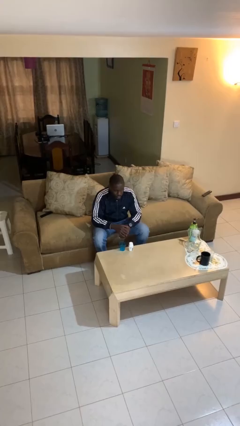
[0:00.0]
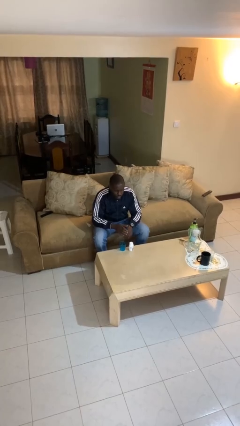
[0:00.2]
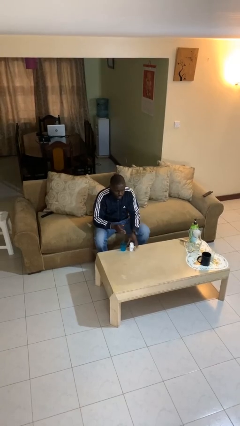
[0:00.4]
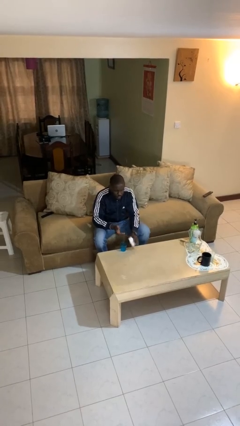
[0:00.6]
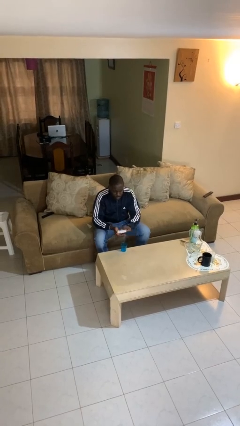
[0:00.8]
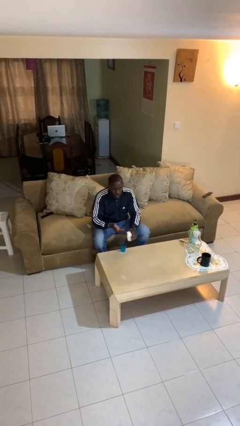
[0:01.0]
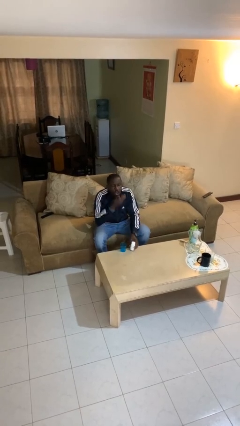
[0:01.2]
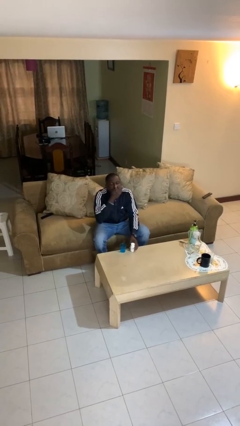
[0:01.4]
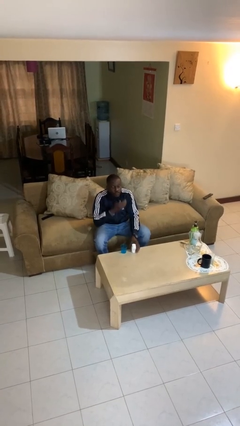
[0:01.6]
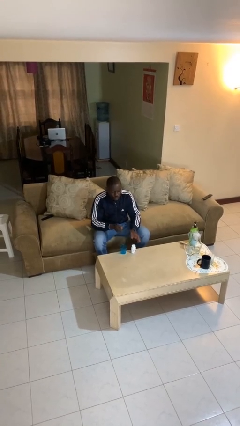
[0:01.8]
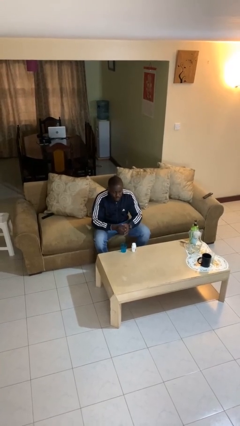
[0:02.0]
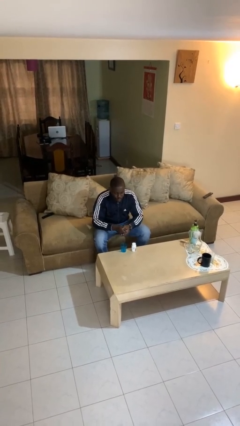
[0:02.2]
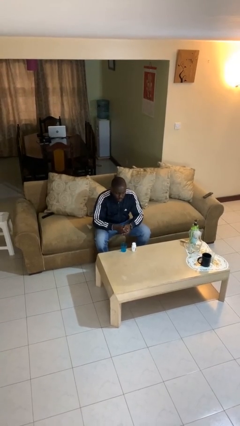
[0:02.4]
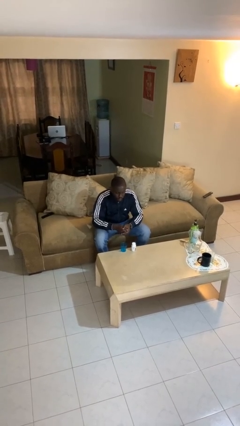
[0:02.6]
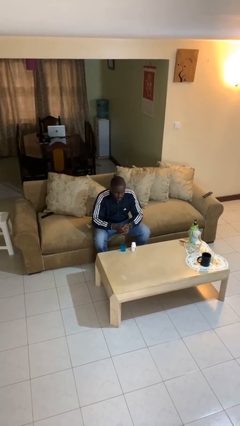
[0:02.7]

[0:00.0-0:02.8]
person takes medicine pills

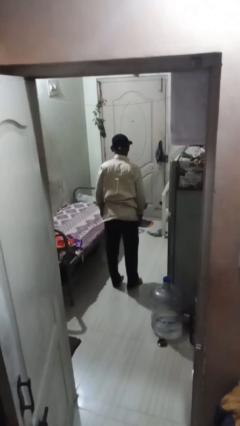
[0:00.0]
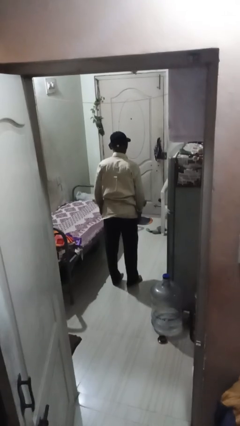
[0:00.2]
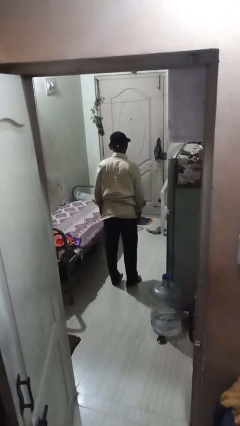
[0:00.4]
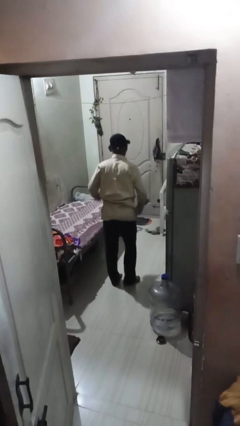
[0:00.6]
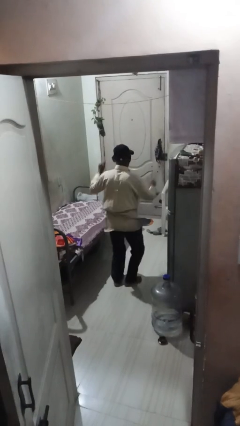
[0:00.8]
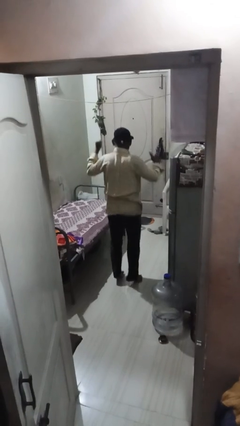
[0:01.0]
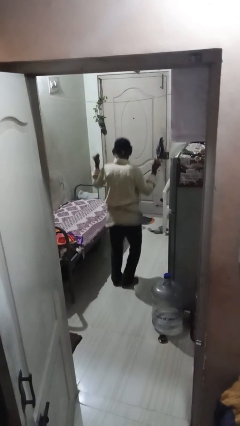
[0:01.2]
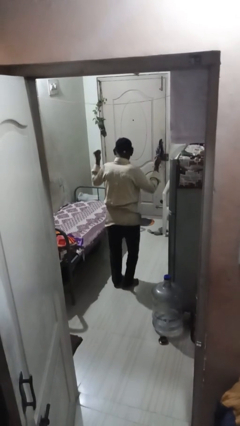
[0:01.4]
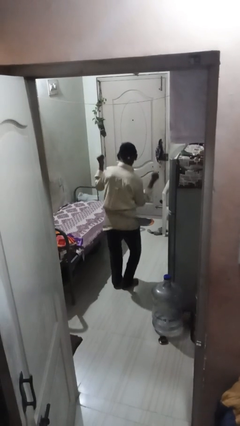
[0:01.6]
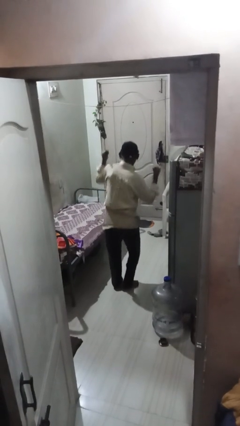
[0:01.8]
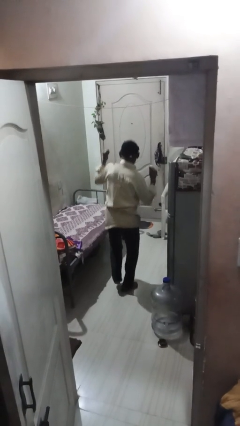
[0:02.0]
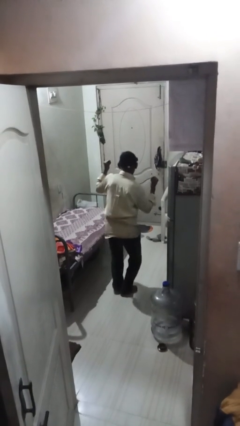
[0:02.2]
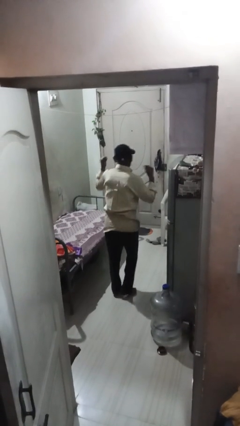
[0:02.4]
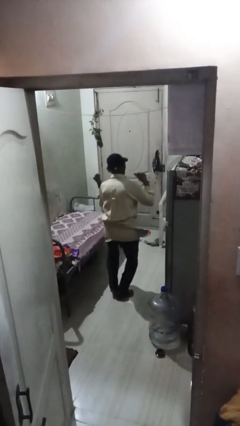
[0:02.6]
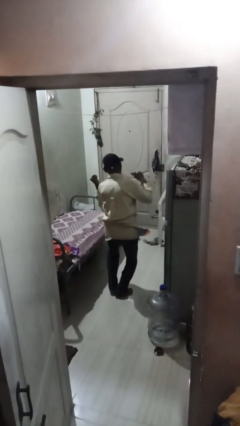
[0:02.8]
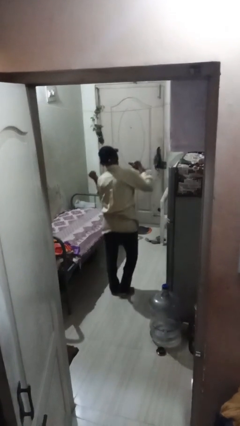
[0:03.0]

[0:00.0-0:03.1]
person dances in place

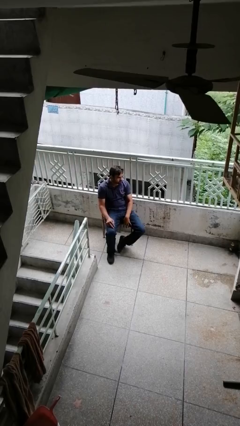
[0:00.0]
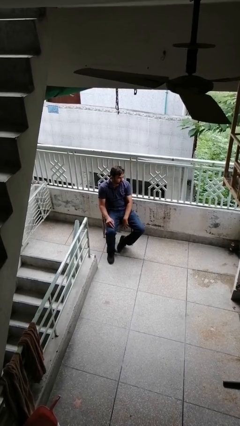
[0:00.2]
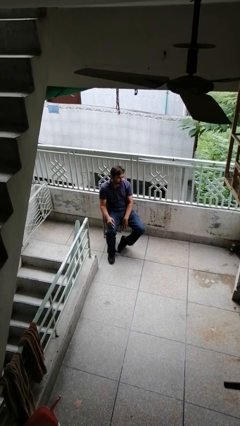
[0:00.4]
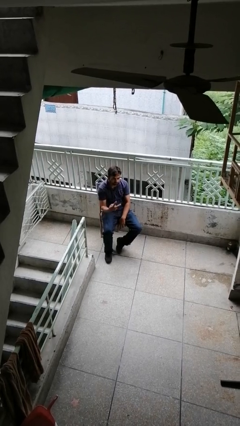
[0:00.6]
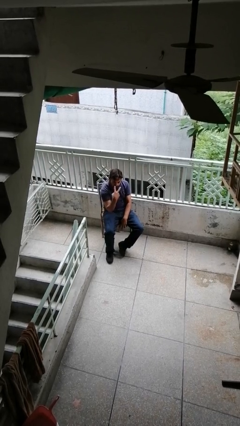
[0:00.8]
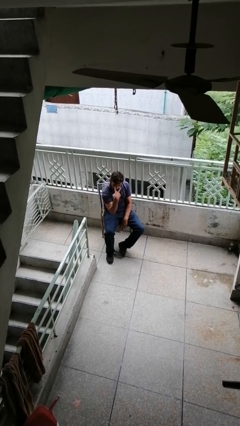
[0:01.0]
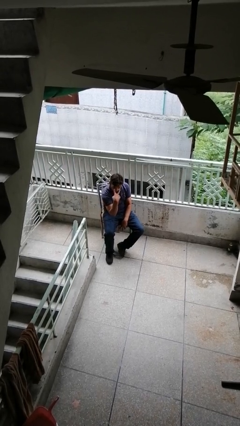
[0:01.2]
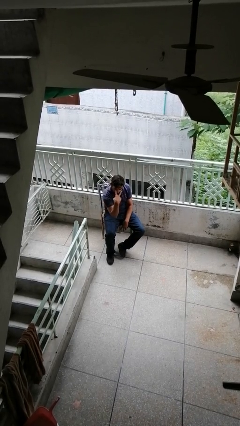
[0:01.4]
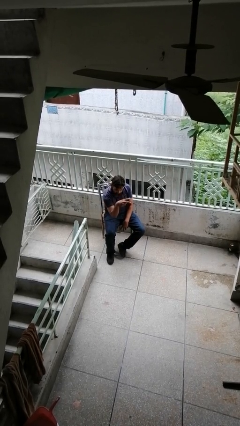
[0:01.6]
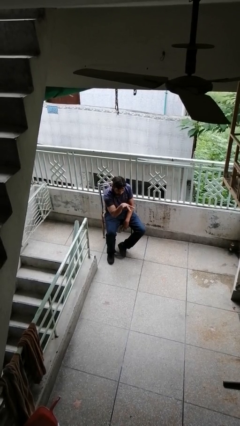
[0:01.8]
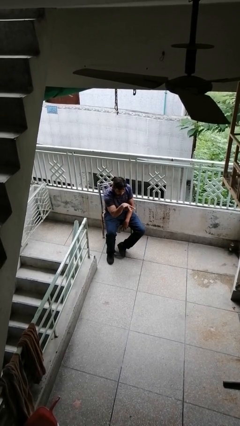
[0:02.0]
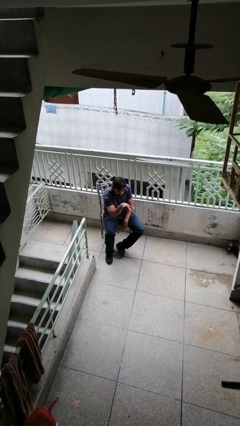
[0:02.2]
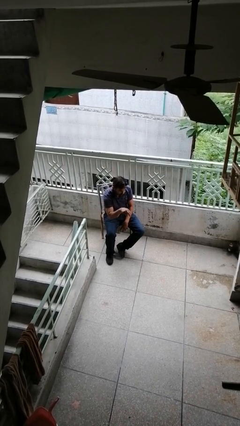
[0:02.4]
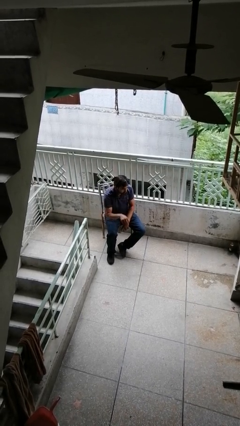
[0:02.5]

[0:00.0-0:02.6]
person gestures watch closely

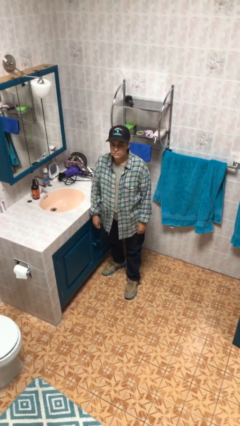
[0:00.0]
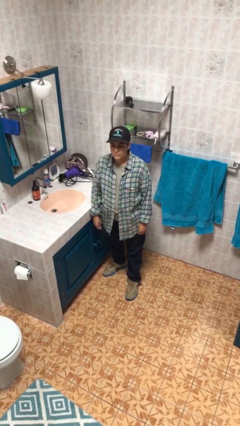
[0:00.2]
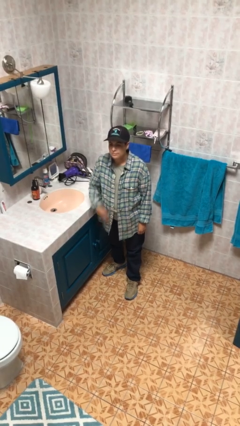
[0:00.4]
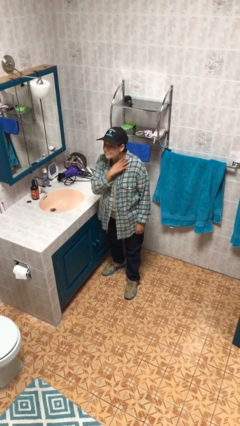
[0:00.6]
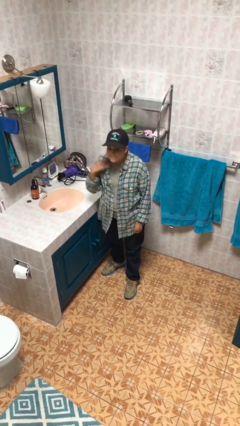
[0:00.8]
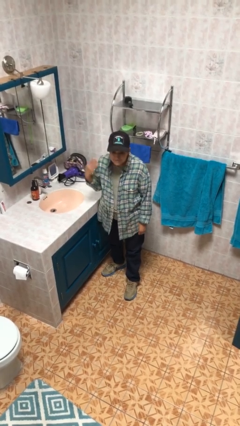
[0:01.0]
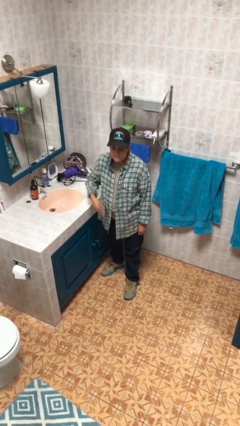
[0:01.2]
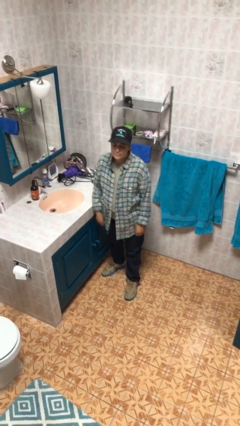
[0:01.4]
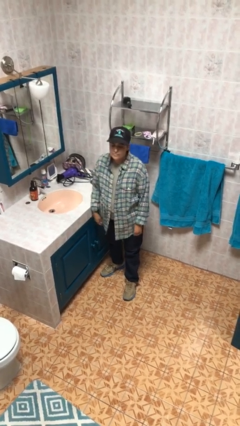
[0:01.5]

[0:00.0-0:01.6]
person gestures cut

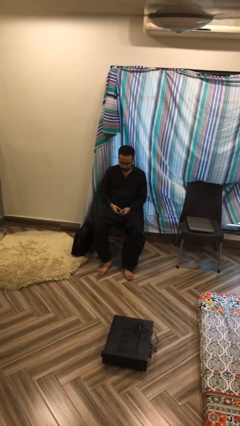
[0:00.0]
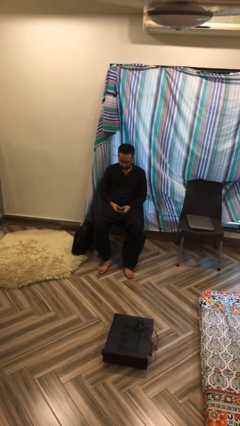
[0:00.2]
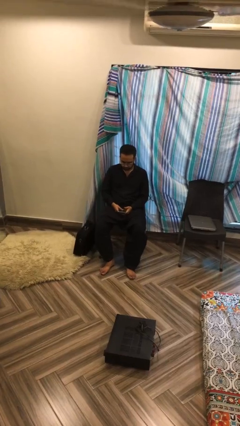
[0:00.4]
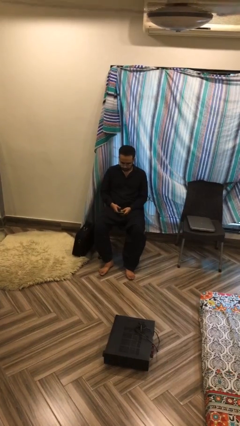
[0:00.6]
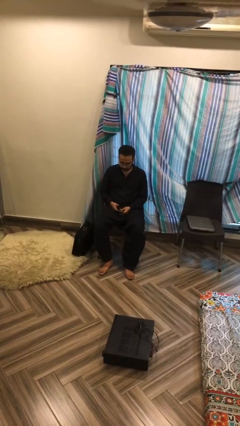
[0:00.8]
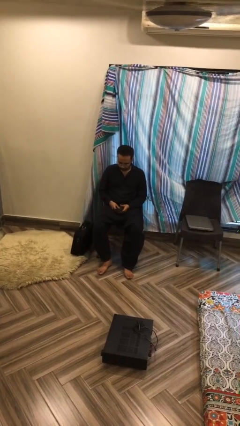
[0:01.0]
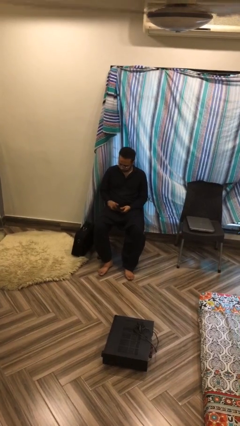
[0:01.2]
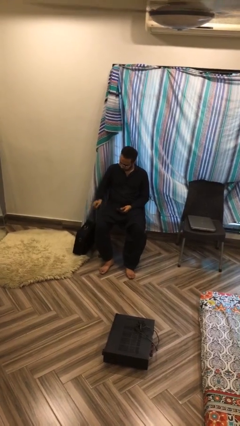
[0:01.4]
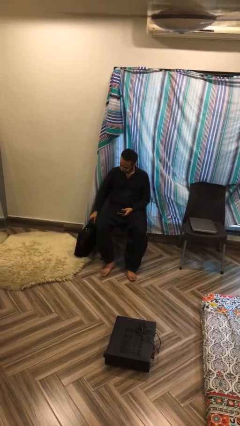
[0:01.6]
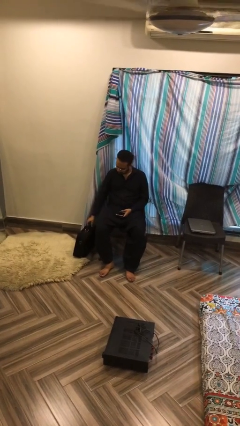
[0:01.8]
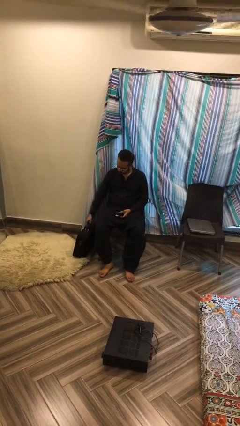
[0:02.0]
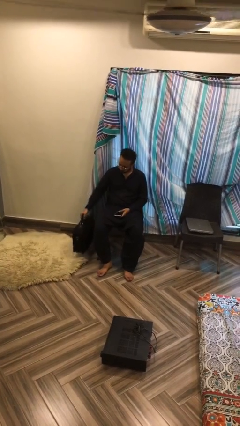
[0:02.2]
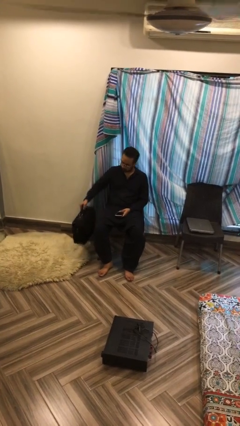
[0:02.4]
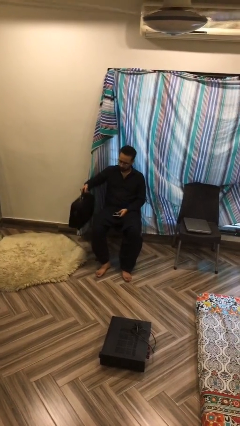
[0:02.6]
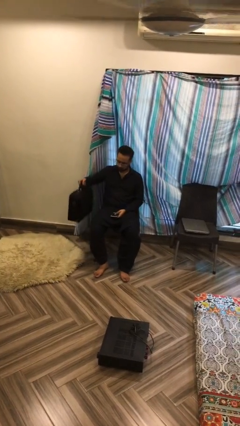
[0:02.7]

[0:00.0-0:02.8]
person picks up object from floor

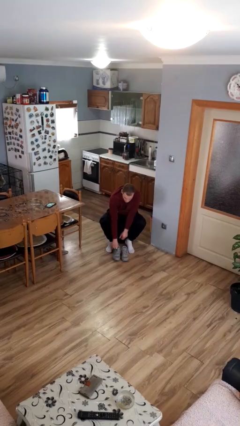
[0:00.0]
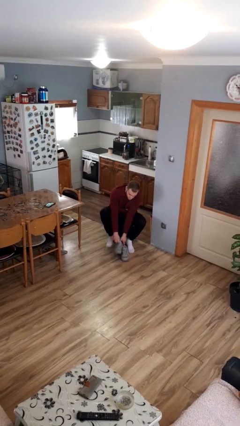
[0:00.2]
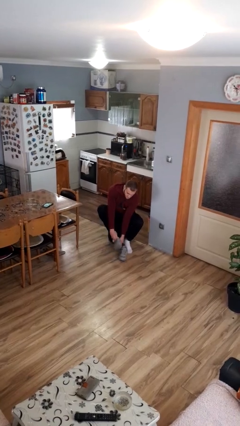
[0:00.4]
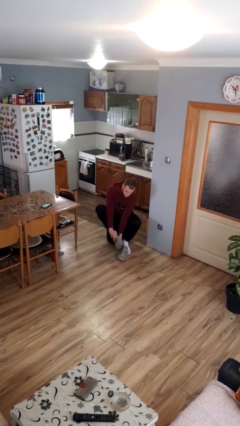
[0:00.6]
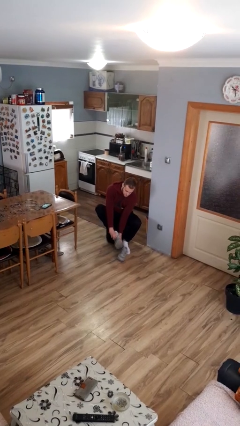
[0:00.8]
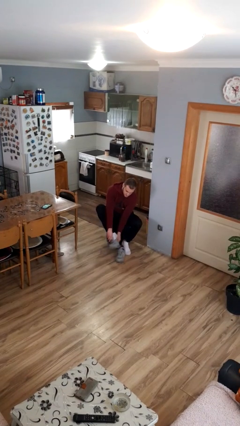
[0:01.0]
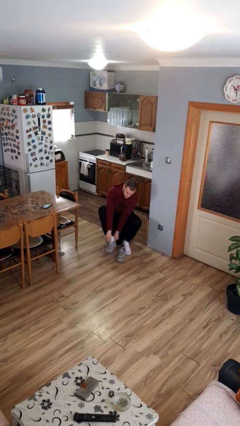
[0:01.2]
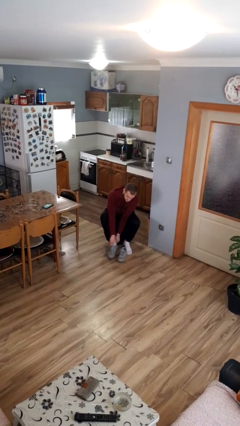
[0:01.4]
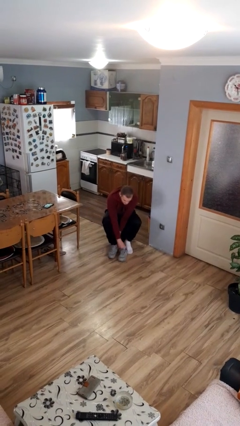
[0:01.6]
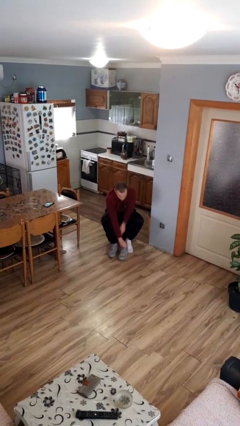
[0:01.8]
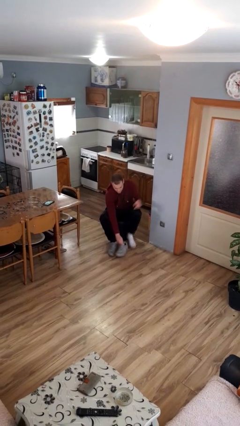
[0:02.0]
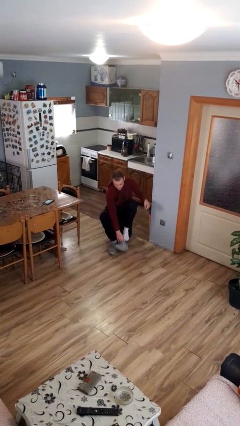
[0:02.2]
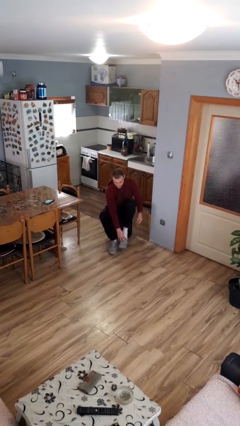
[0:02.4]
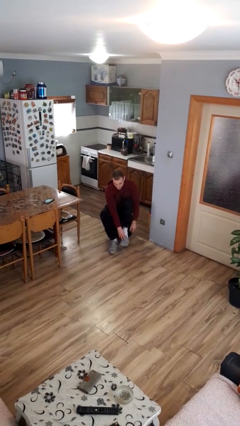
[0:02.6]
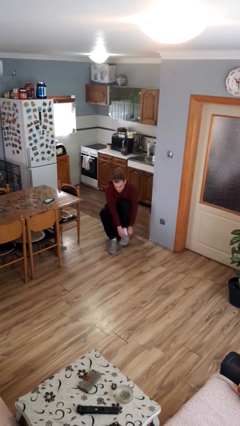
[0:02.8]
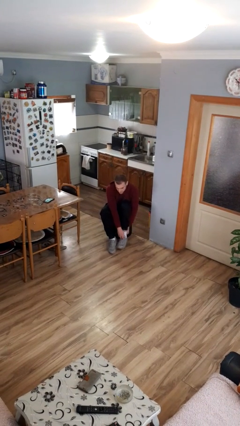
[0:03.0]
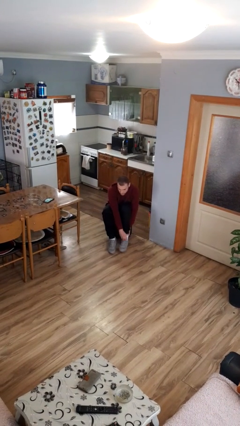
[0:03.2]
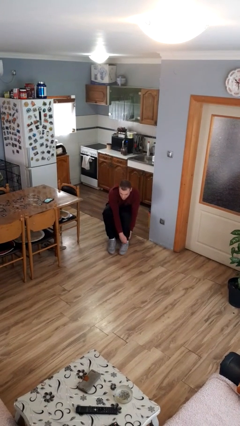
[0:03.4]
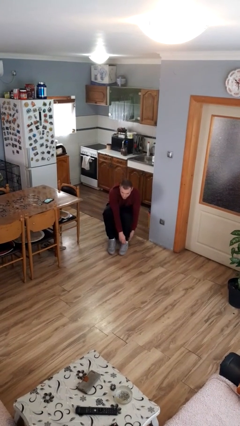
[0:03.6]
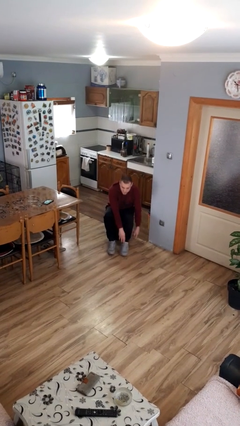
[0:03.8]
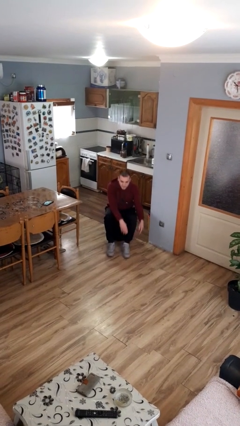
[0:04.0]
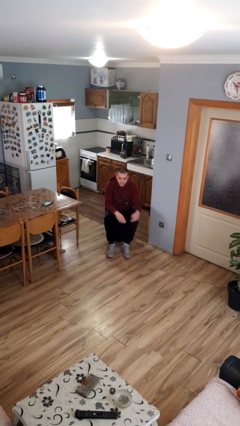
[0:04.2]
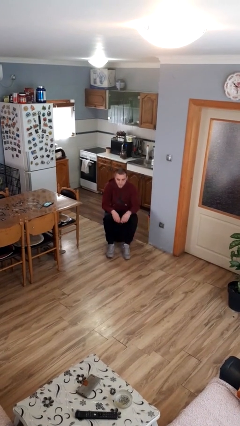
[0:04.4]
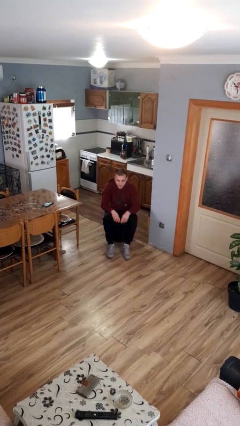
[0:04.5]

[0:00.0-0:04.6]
person puts on shoes
